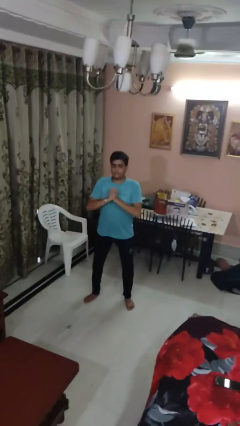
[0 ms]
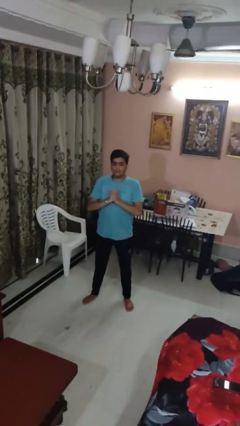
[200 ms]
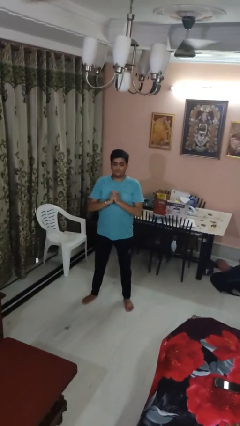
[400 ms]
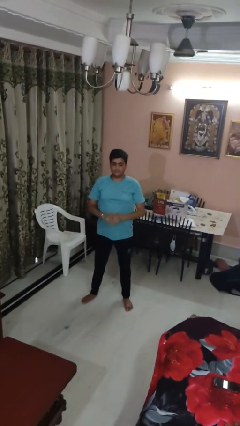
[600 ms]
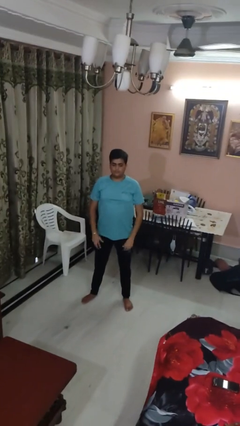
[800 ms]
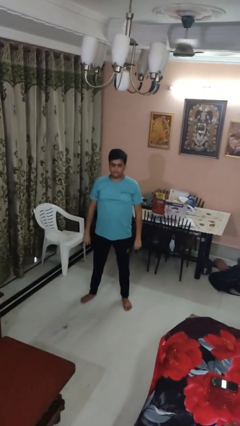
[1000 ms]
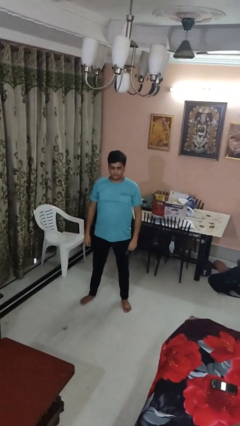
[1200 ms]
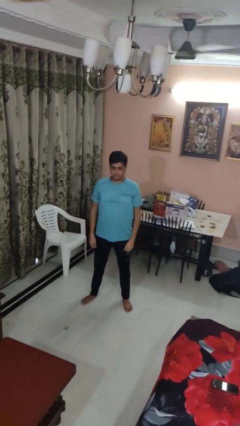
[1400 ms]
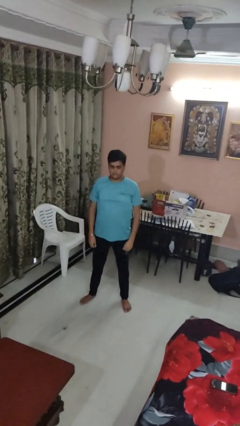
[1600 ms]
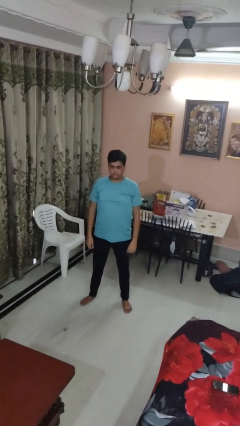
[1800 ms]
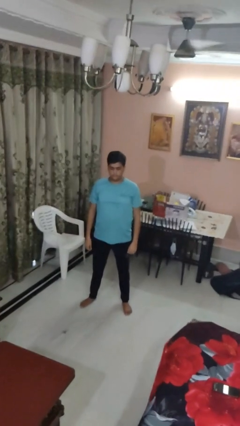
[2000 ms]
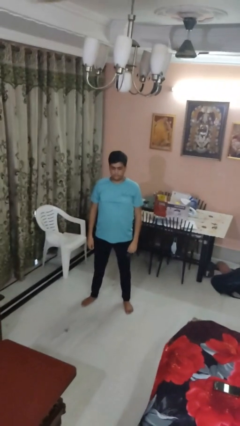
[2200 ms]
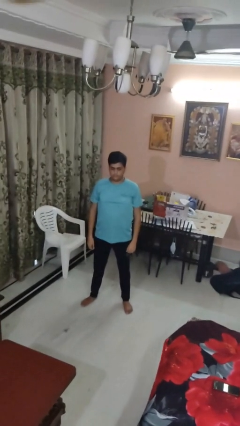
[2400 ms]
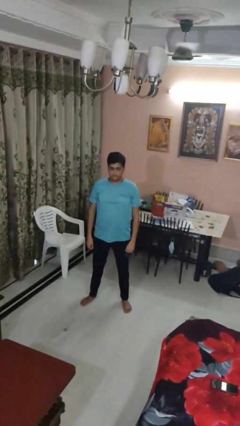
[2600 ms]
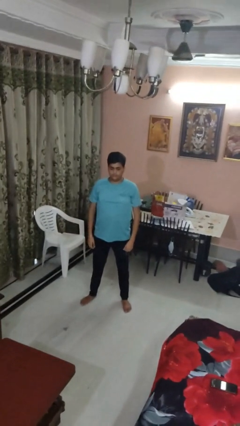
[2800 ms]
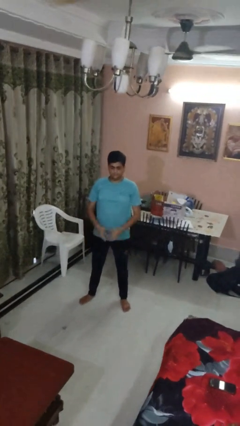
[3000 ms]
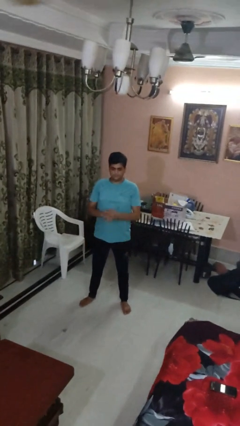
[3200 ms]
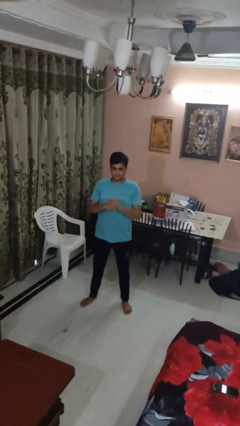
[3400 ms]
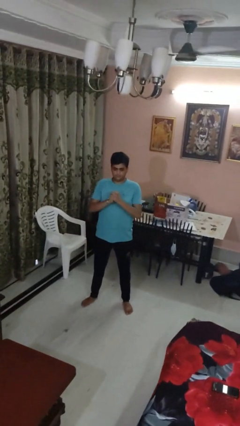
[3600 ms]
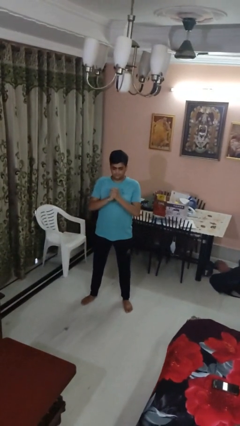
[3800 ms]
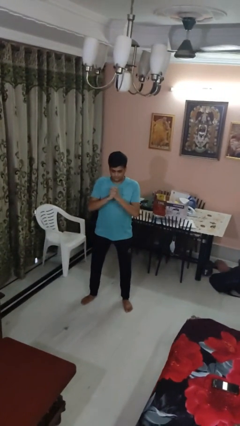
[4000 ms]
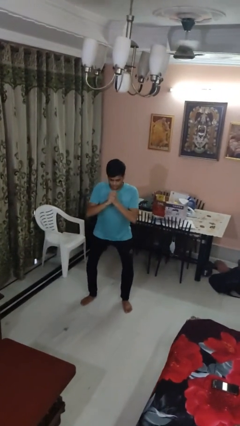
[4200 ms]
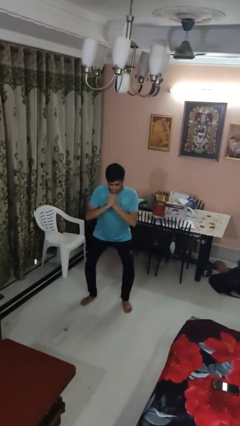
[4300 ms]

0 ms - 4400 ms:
person stands up

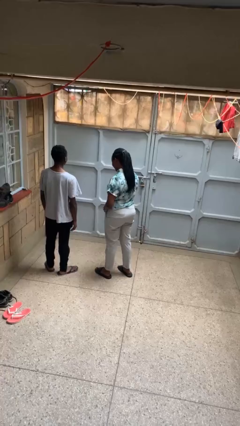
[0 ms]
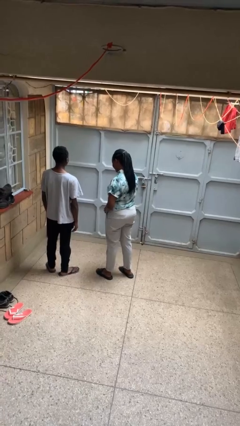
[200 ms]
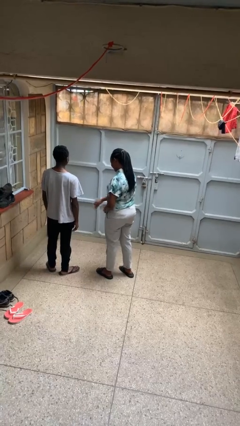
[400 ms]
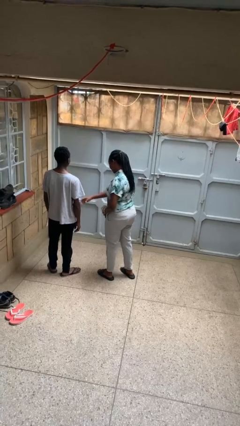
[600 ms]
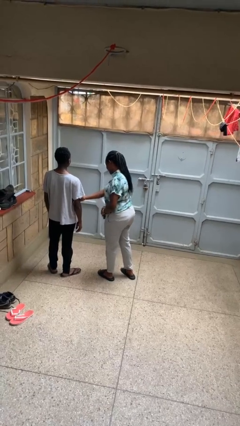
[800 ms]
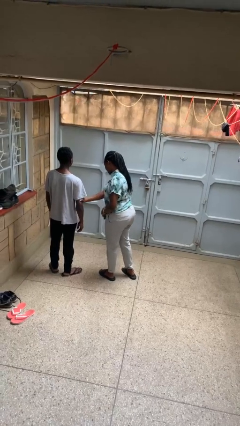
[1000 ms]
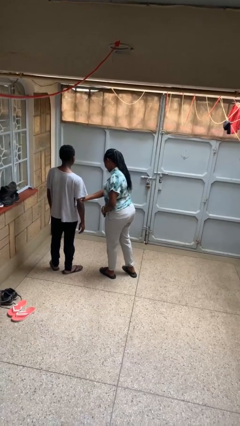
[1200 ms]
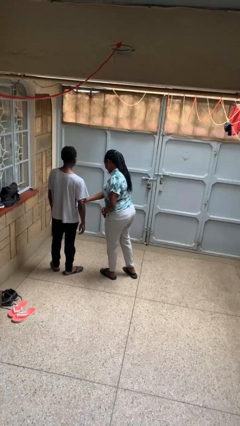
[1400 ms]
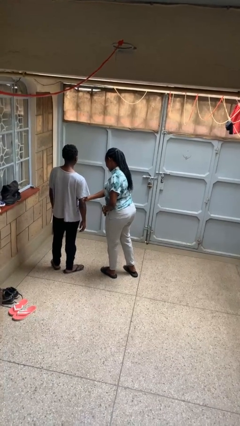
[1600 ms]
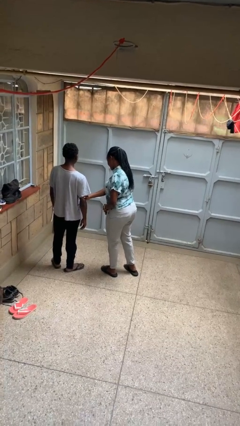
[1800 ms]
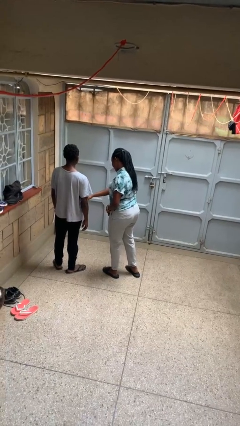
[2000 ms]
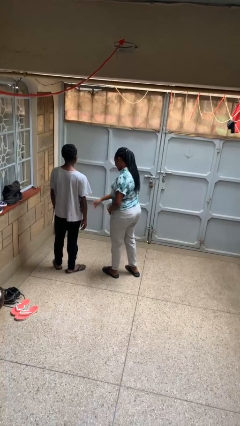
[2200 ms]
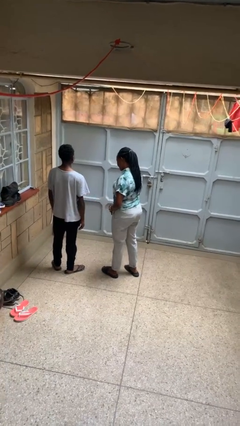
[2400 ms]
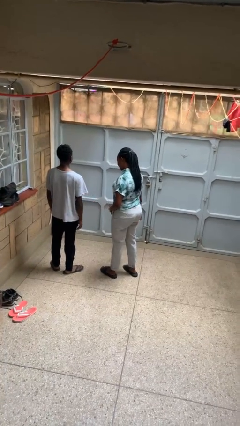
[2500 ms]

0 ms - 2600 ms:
person grabs person by bicep

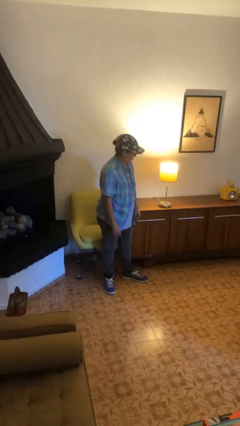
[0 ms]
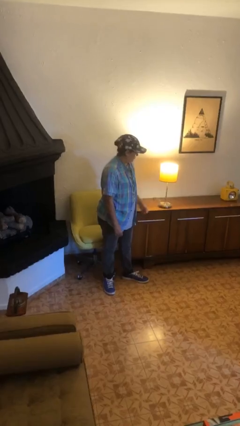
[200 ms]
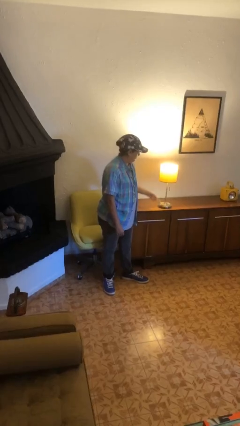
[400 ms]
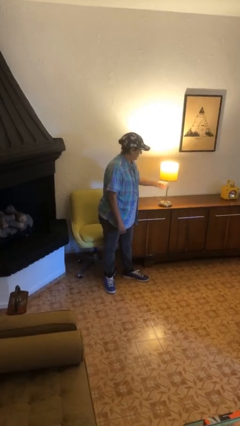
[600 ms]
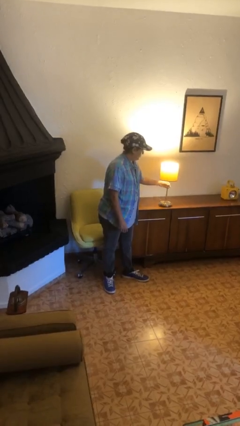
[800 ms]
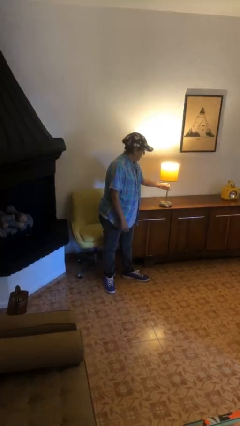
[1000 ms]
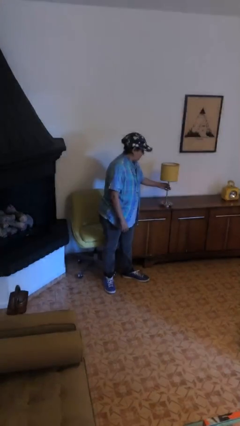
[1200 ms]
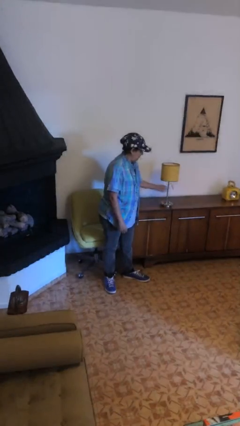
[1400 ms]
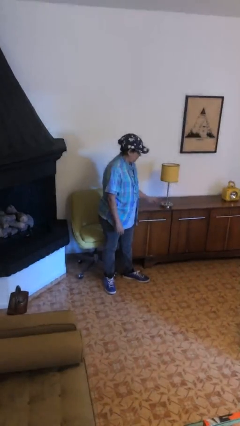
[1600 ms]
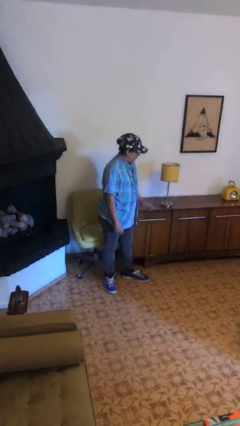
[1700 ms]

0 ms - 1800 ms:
person turns off lamp

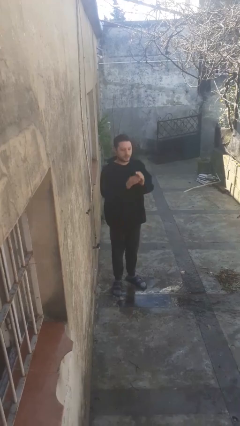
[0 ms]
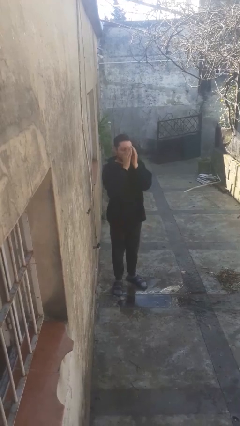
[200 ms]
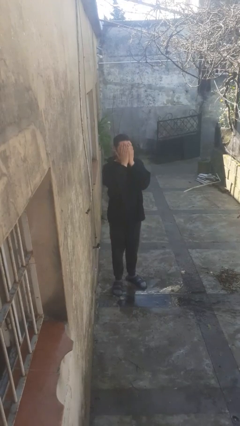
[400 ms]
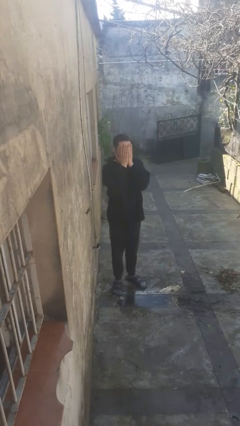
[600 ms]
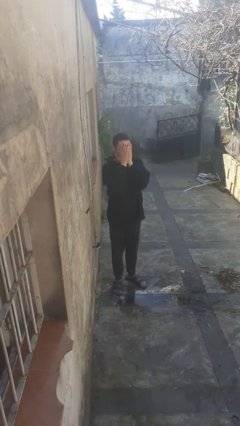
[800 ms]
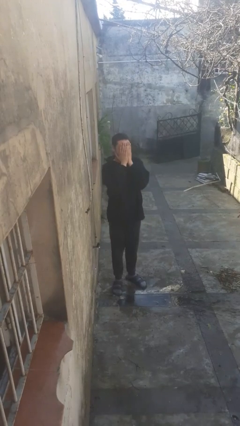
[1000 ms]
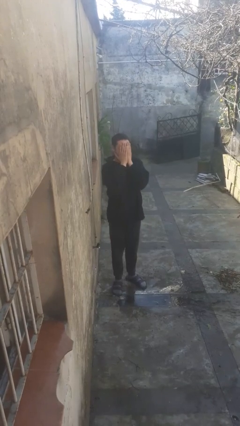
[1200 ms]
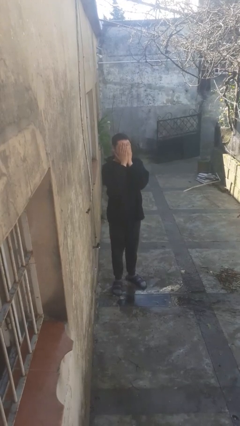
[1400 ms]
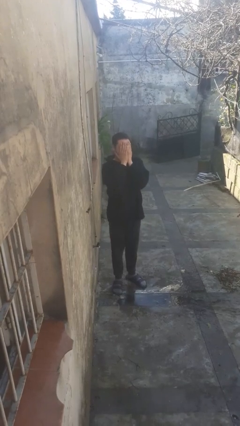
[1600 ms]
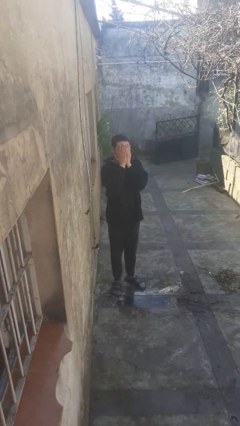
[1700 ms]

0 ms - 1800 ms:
person covers face with hands

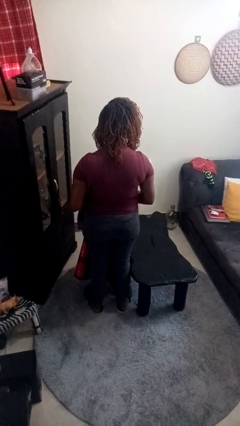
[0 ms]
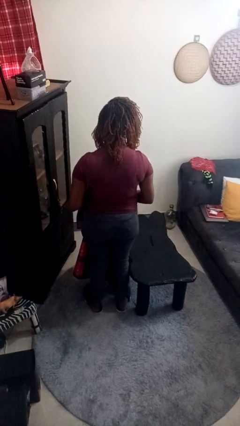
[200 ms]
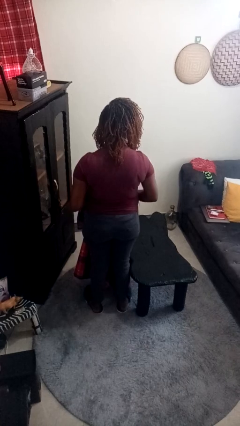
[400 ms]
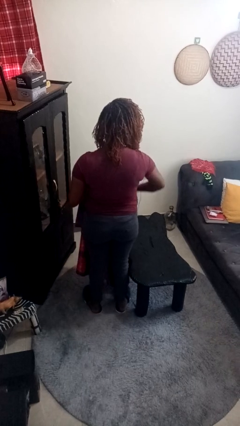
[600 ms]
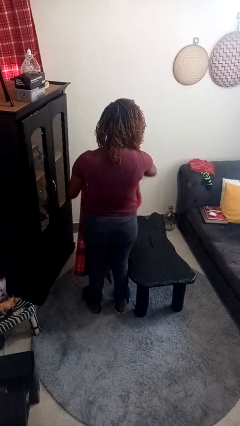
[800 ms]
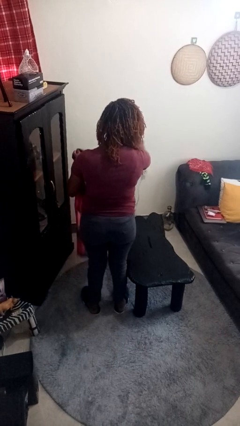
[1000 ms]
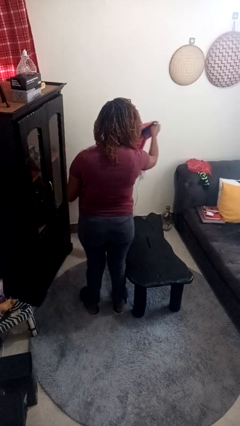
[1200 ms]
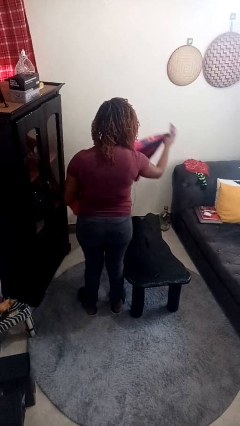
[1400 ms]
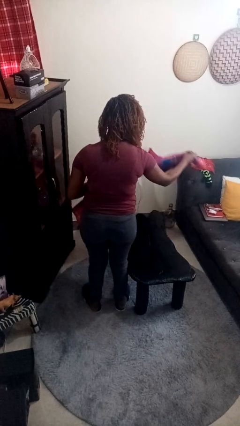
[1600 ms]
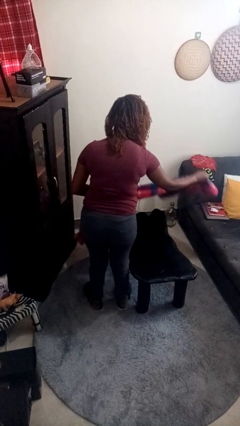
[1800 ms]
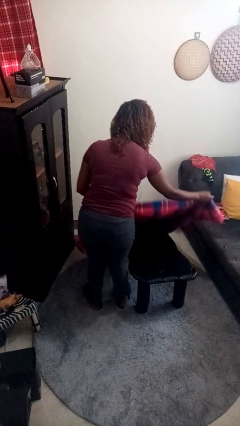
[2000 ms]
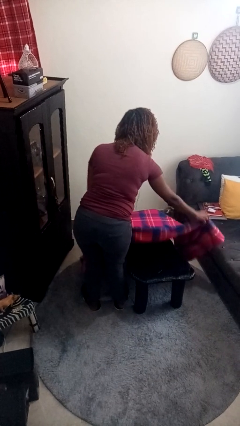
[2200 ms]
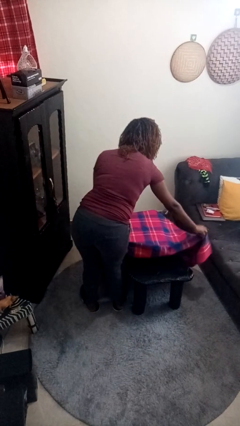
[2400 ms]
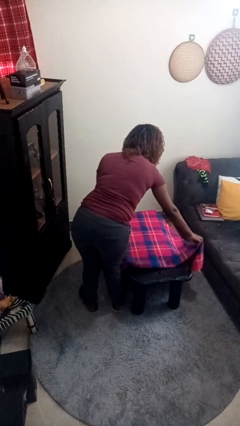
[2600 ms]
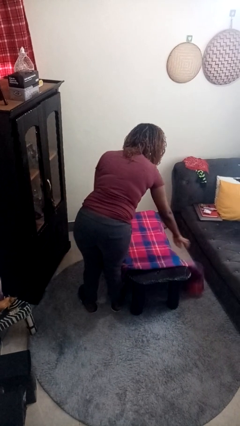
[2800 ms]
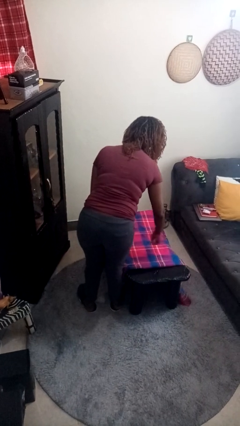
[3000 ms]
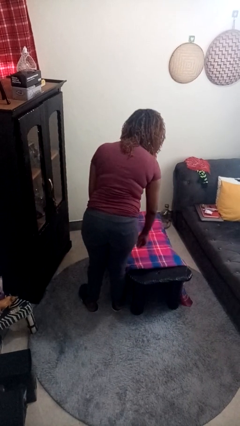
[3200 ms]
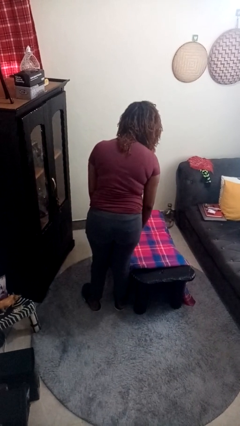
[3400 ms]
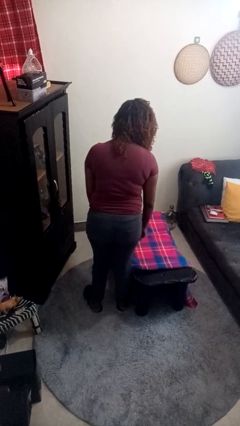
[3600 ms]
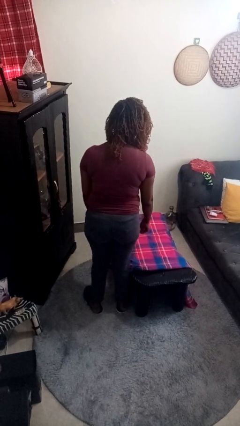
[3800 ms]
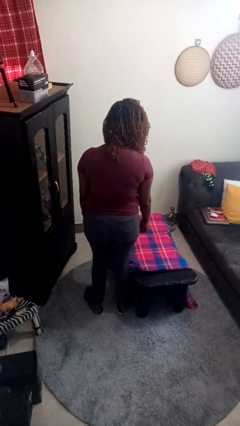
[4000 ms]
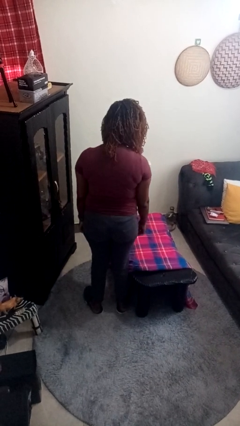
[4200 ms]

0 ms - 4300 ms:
person spreads tablecloth

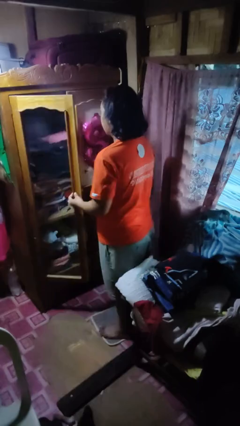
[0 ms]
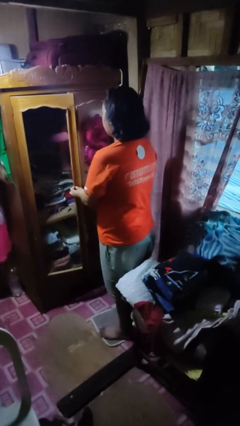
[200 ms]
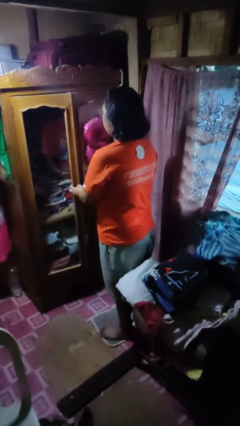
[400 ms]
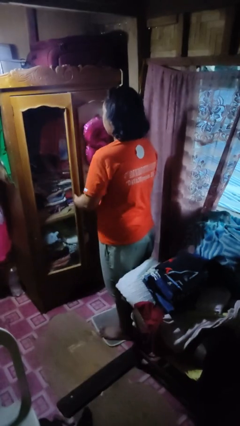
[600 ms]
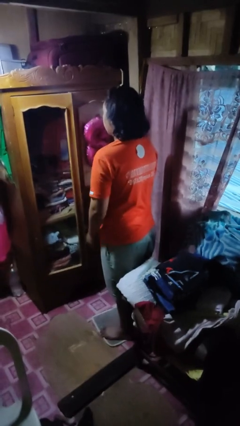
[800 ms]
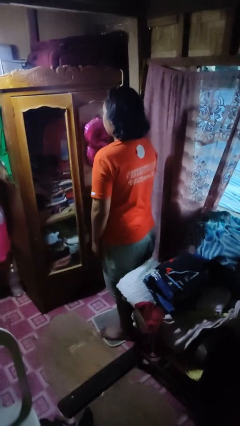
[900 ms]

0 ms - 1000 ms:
person closes closet door

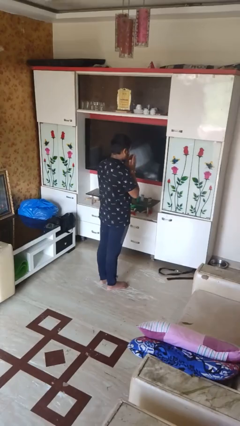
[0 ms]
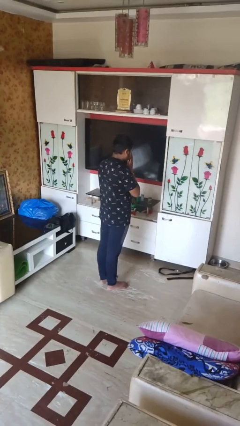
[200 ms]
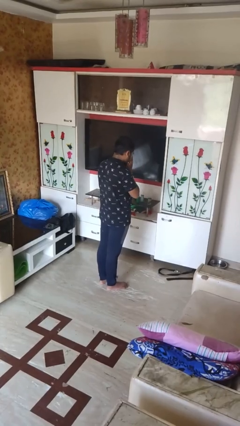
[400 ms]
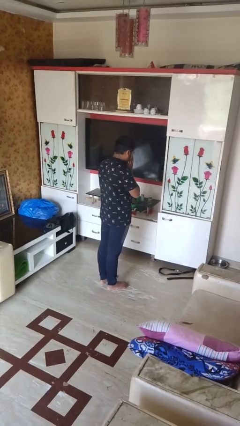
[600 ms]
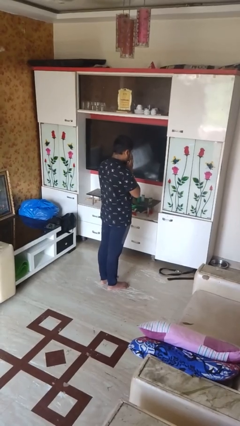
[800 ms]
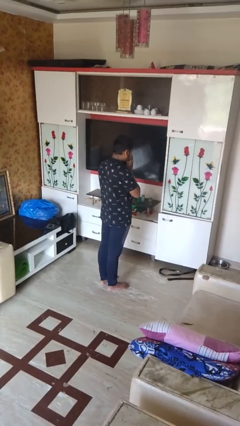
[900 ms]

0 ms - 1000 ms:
person sneezes into hand

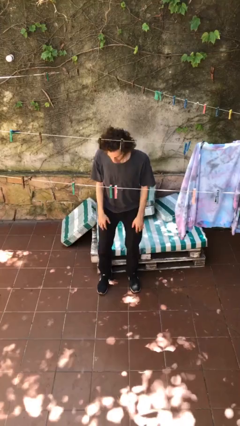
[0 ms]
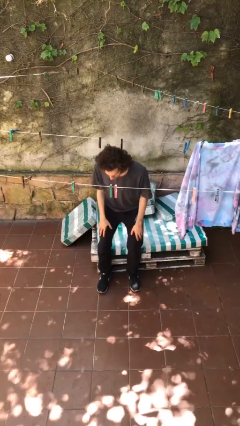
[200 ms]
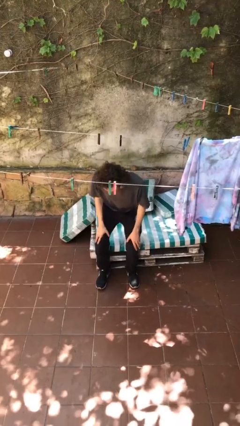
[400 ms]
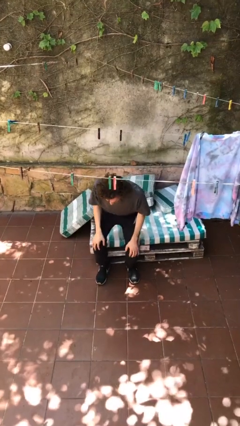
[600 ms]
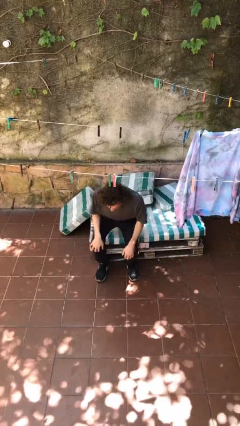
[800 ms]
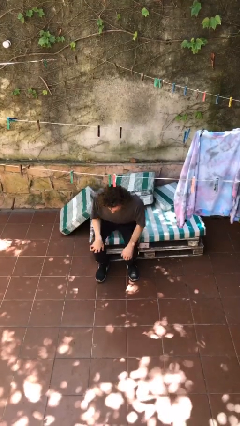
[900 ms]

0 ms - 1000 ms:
person sits down
